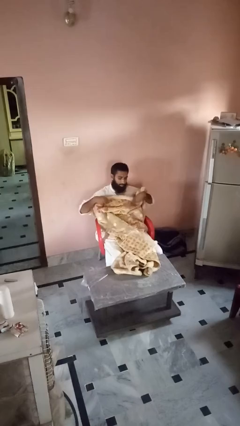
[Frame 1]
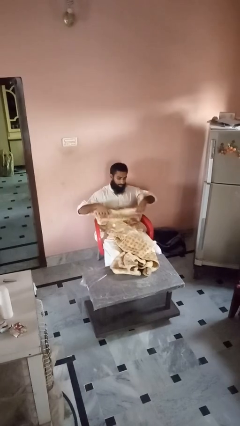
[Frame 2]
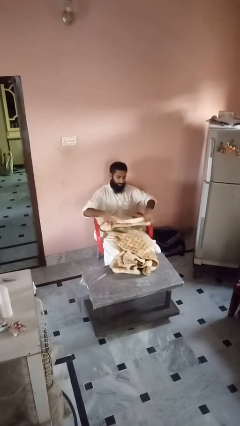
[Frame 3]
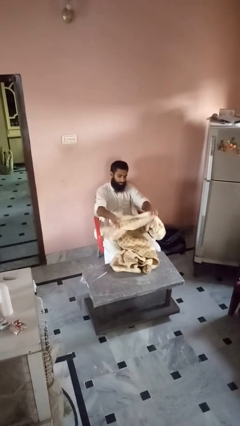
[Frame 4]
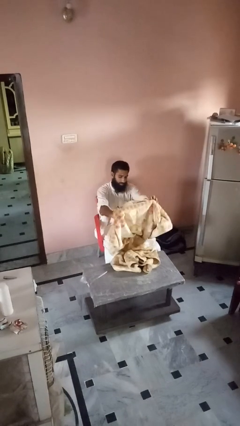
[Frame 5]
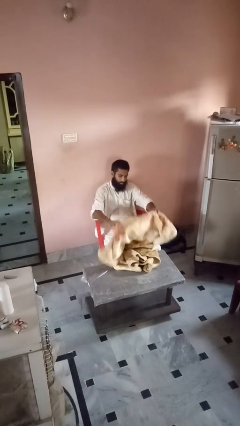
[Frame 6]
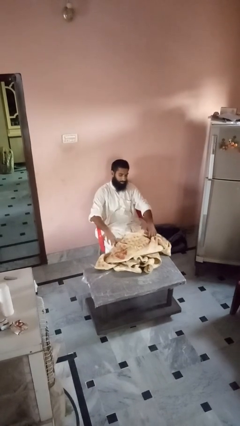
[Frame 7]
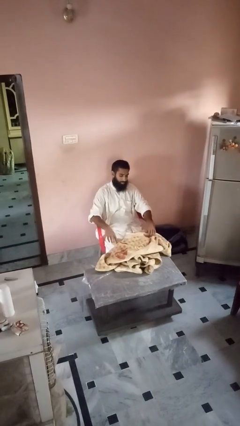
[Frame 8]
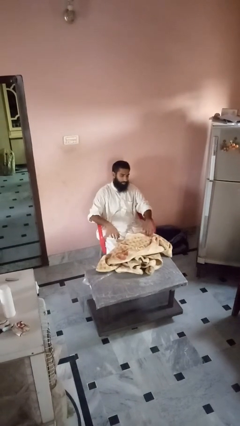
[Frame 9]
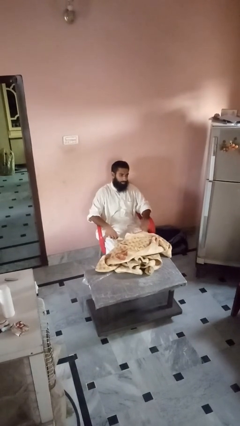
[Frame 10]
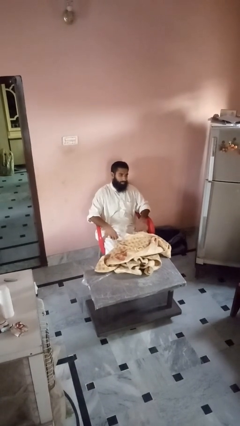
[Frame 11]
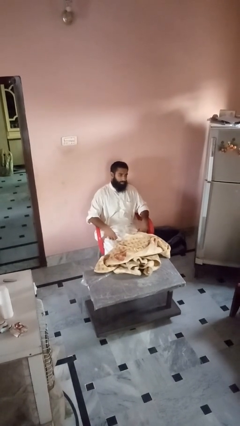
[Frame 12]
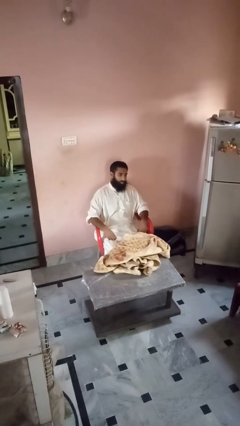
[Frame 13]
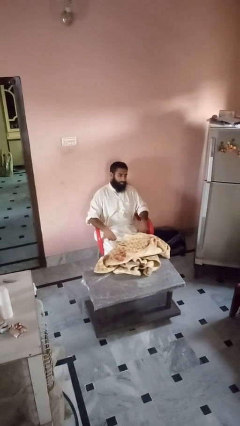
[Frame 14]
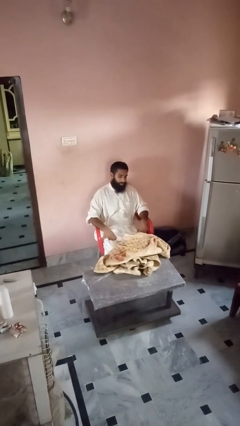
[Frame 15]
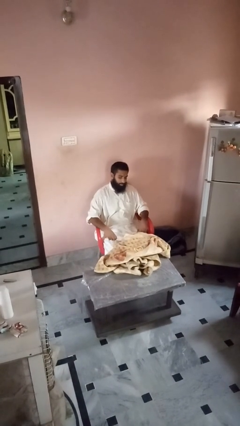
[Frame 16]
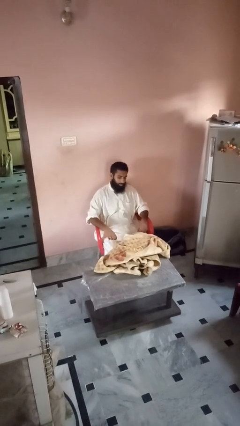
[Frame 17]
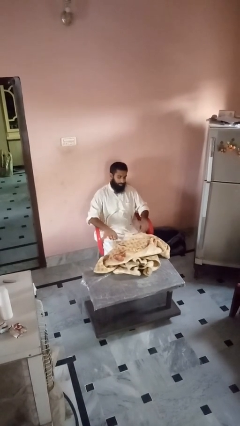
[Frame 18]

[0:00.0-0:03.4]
person uncovers with blanket

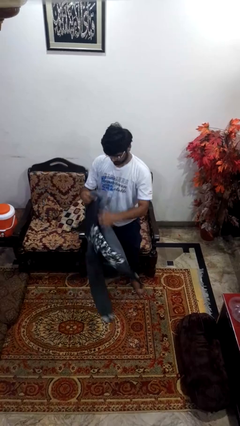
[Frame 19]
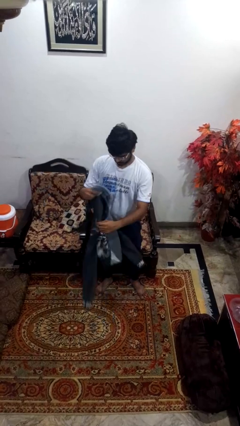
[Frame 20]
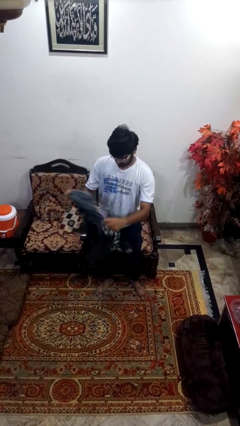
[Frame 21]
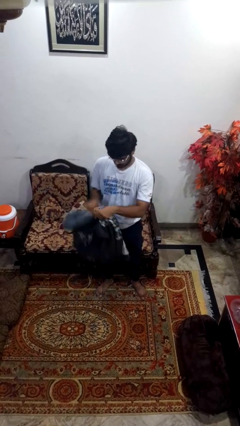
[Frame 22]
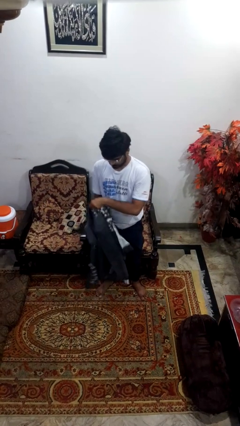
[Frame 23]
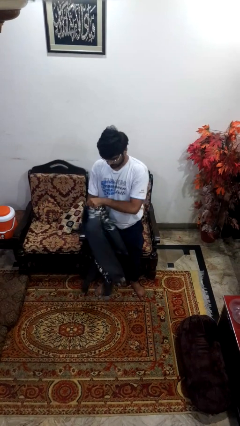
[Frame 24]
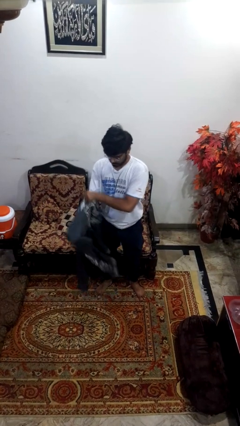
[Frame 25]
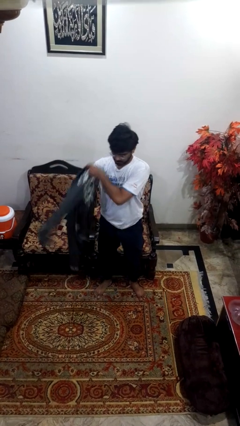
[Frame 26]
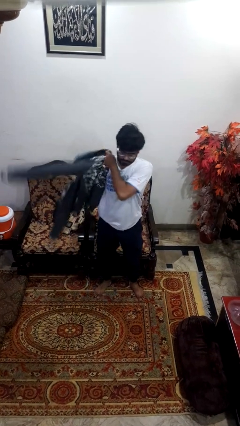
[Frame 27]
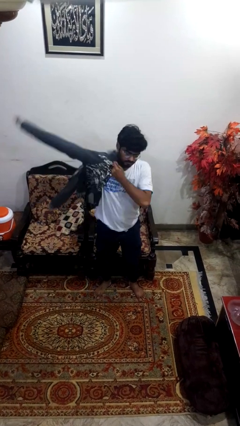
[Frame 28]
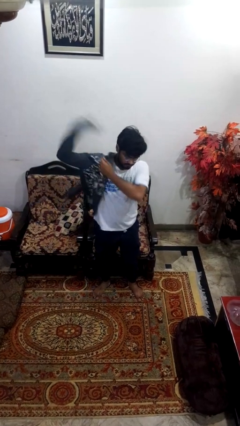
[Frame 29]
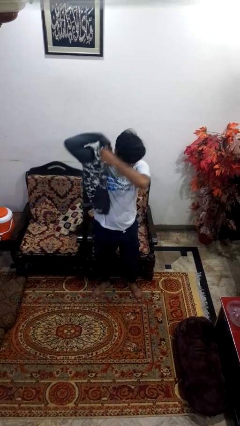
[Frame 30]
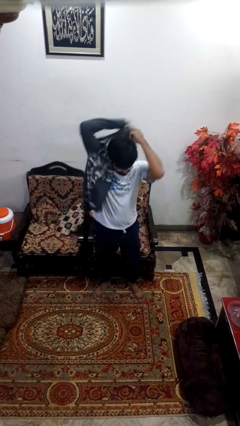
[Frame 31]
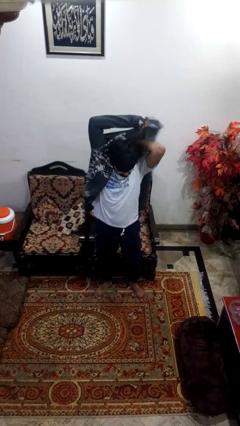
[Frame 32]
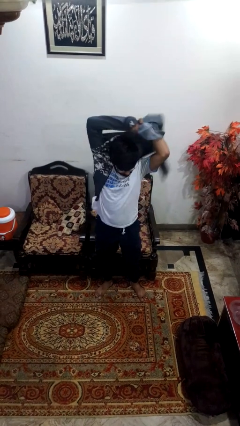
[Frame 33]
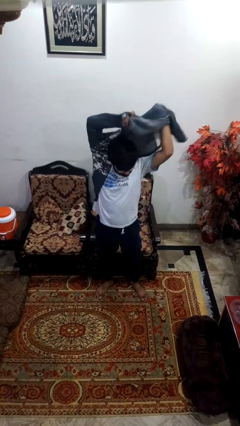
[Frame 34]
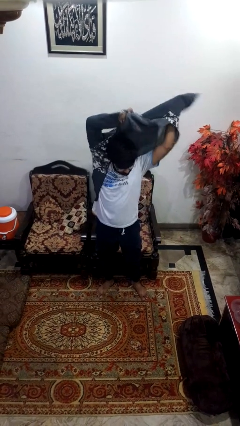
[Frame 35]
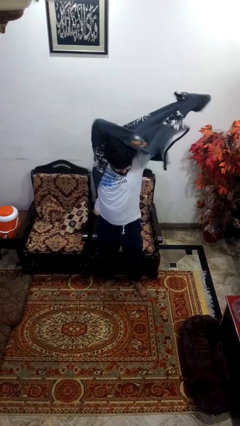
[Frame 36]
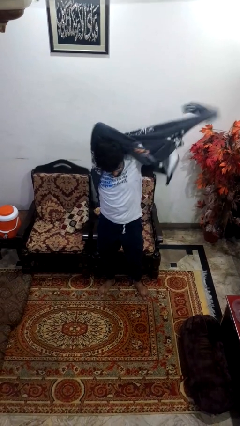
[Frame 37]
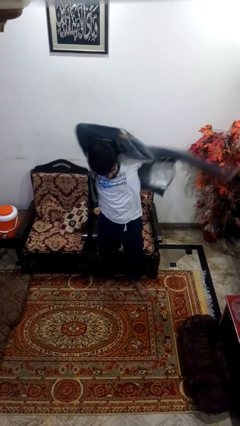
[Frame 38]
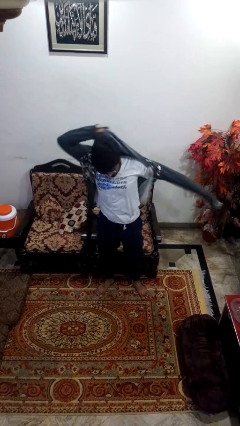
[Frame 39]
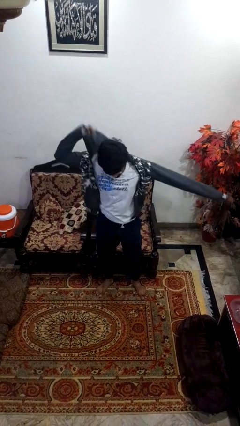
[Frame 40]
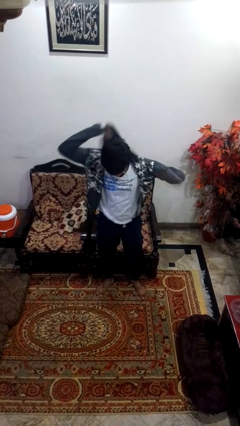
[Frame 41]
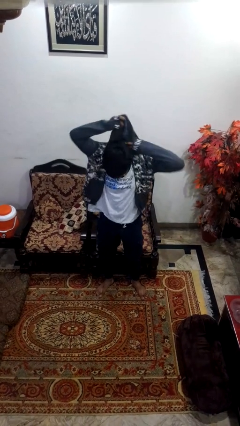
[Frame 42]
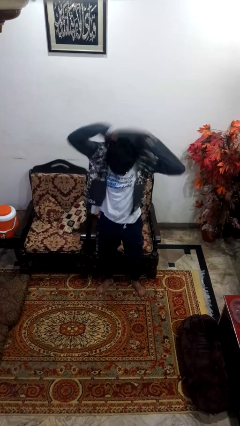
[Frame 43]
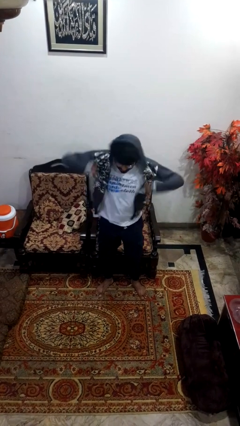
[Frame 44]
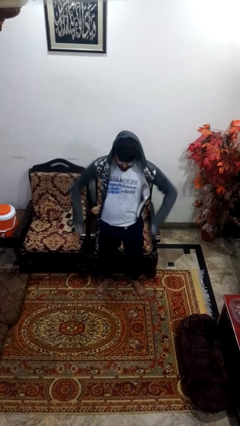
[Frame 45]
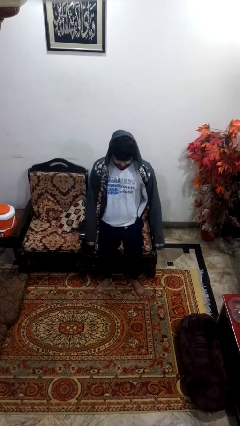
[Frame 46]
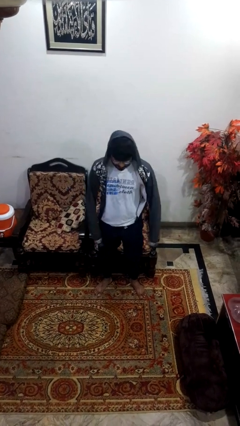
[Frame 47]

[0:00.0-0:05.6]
person puts on hoodie

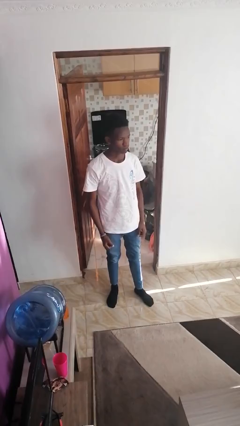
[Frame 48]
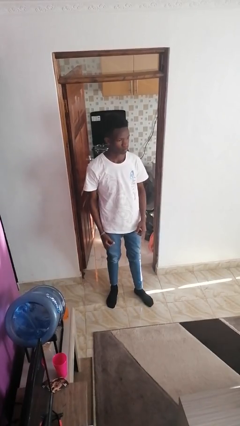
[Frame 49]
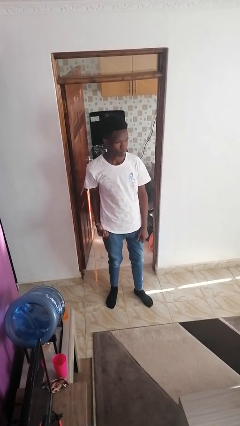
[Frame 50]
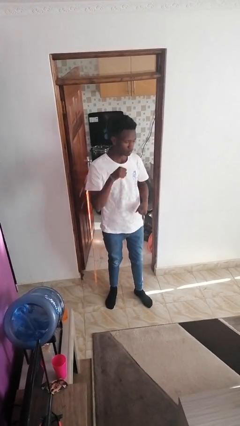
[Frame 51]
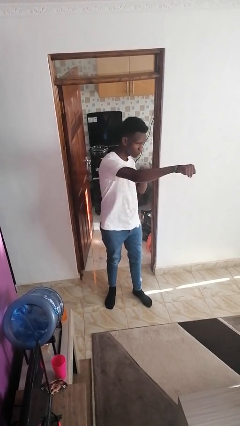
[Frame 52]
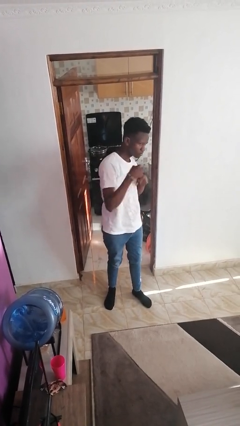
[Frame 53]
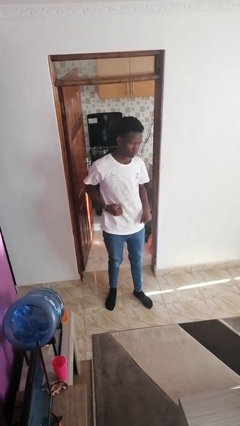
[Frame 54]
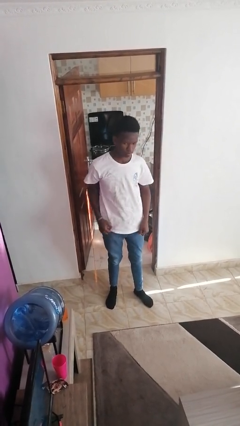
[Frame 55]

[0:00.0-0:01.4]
person punches

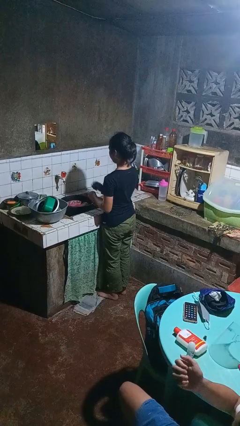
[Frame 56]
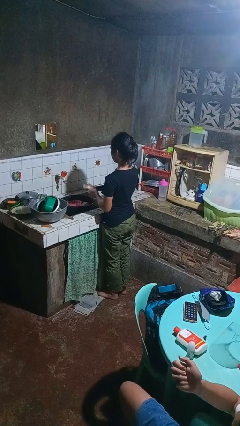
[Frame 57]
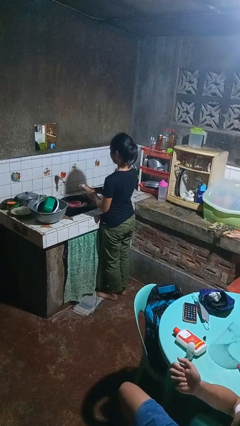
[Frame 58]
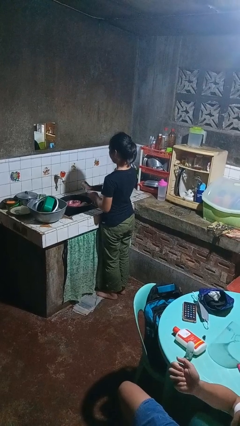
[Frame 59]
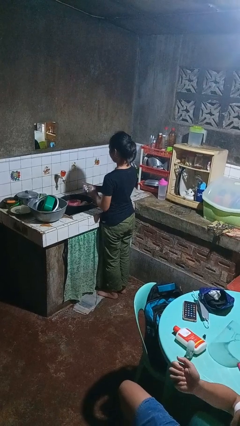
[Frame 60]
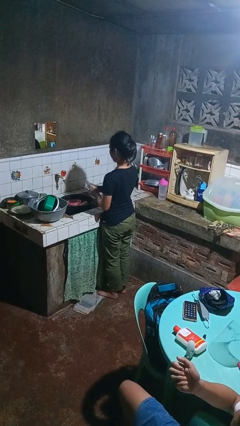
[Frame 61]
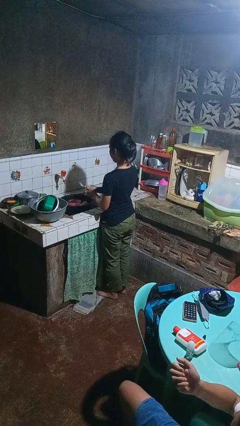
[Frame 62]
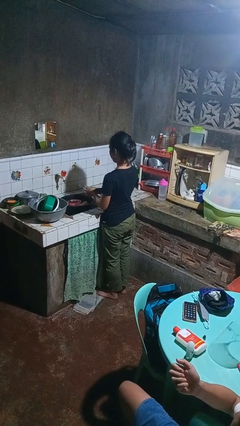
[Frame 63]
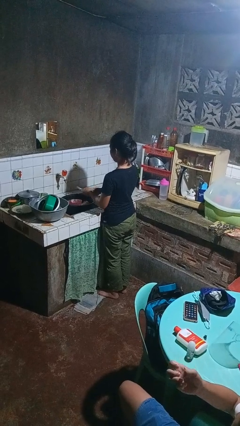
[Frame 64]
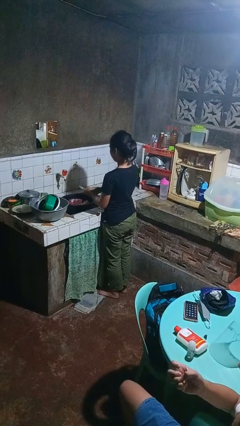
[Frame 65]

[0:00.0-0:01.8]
person washes dish

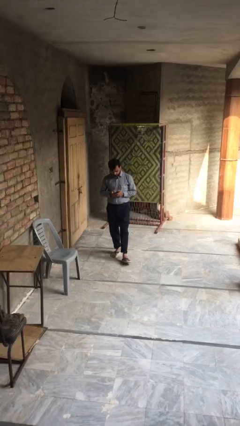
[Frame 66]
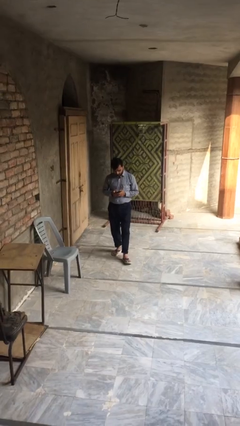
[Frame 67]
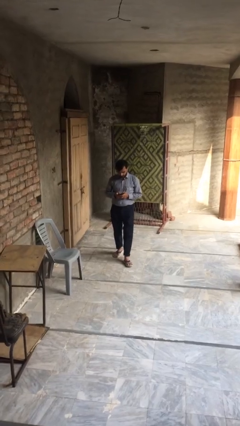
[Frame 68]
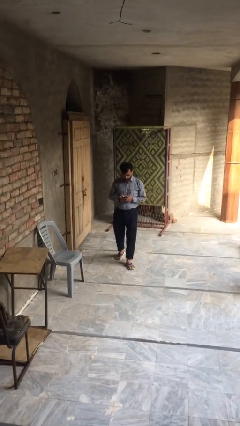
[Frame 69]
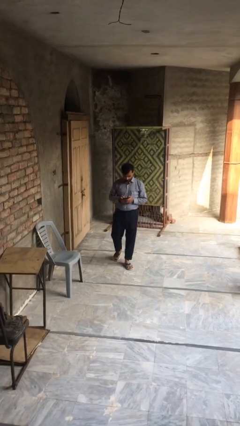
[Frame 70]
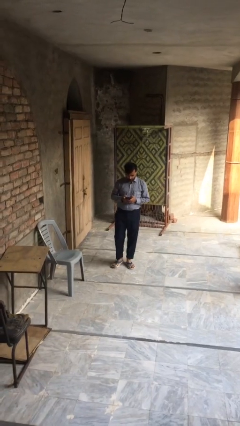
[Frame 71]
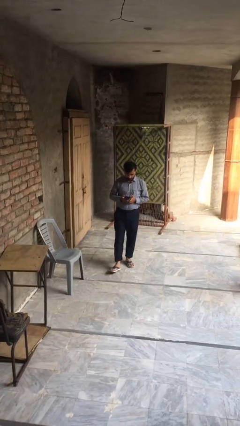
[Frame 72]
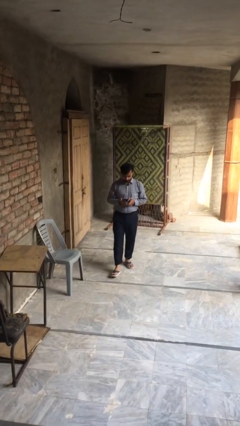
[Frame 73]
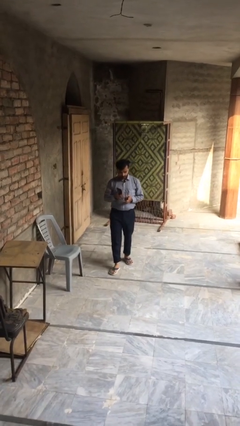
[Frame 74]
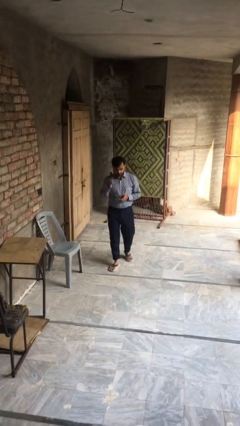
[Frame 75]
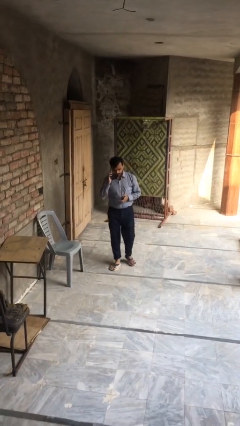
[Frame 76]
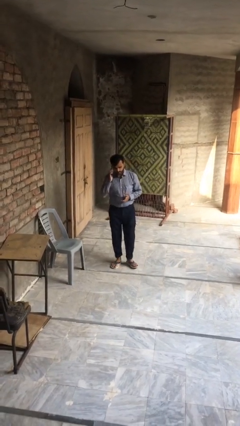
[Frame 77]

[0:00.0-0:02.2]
person talks on phone

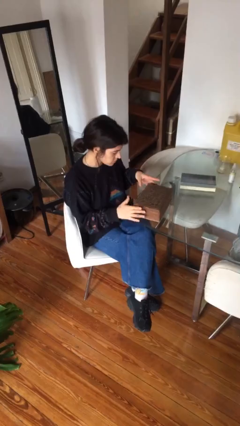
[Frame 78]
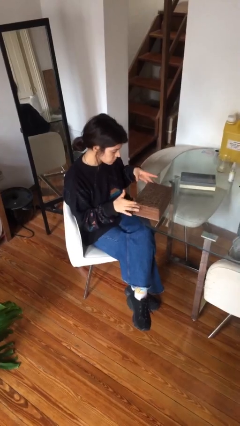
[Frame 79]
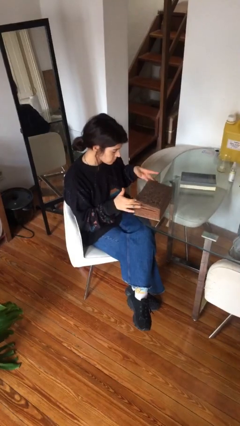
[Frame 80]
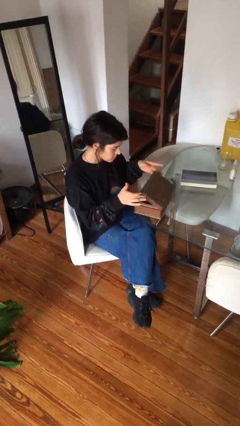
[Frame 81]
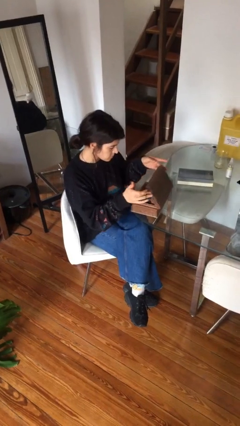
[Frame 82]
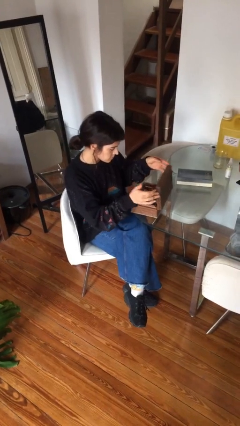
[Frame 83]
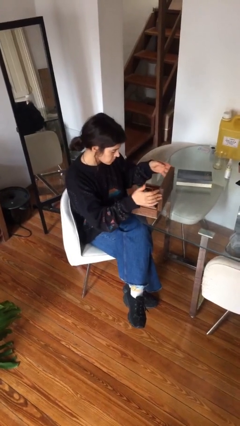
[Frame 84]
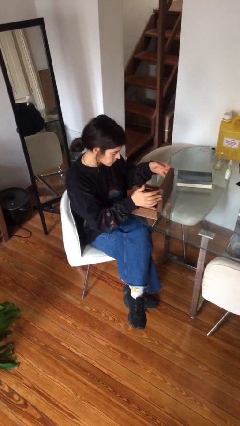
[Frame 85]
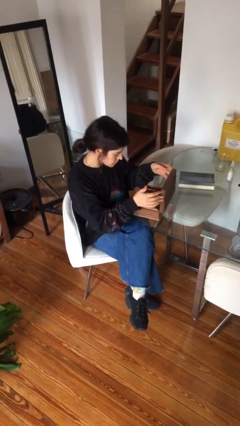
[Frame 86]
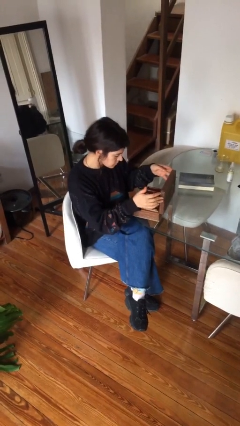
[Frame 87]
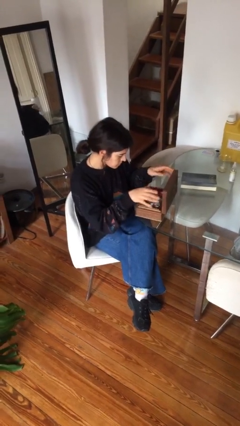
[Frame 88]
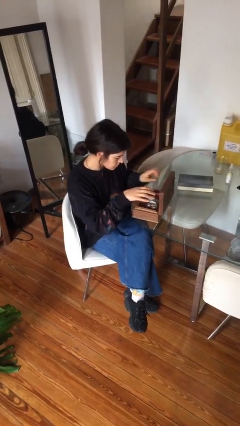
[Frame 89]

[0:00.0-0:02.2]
person opens jewelry box

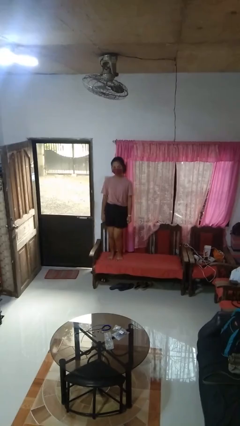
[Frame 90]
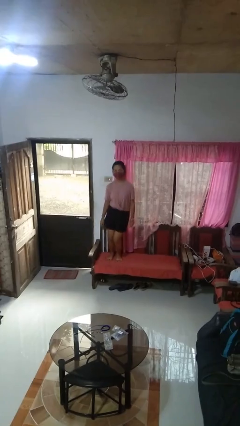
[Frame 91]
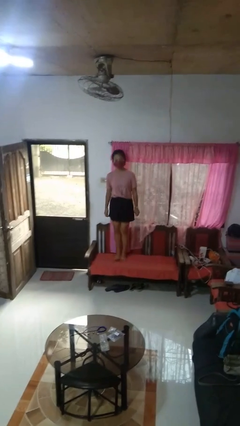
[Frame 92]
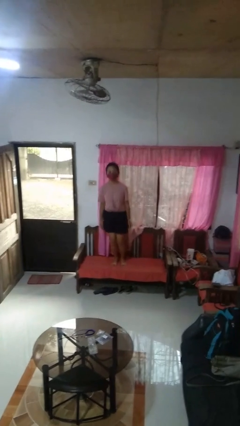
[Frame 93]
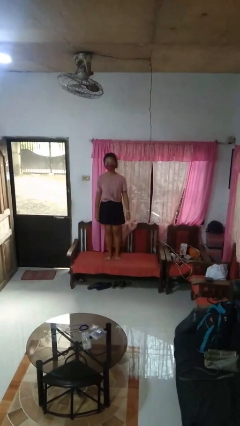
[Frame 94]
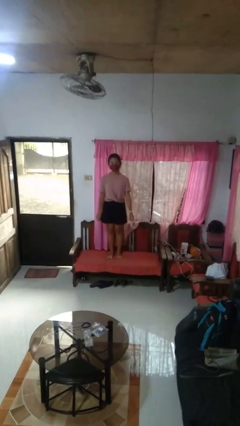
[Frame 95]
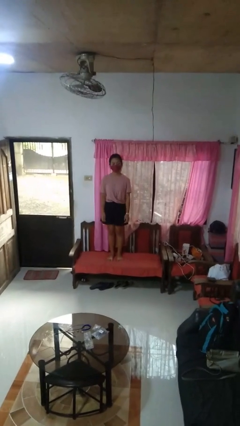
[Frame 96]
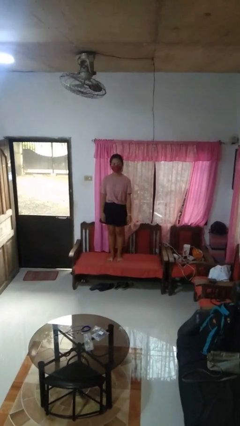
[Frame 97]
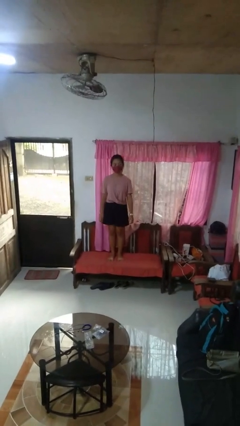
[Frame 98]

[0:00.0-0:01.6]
person jumps on couch
